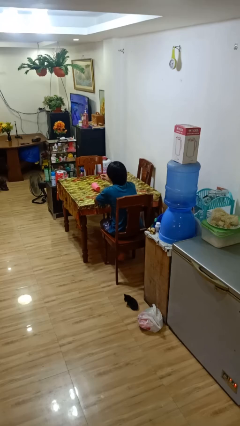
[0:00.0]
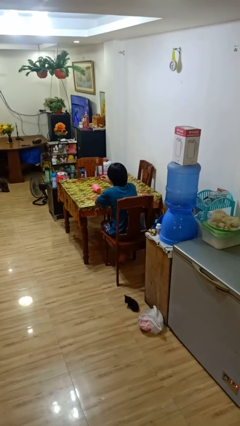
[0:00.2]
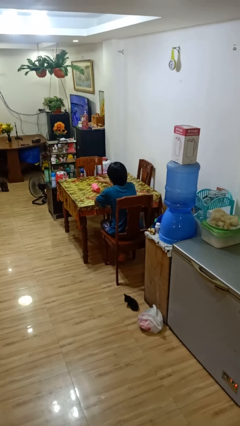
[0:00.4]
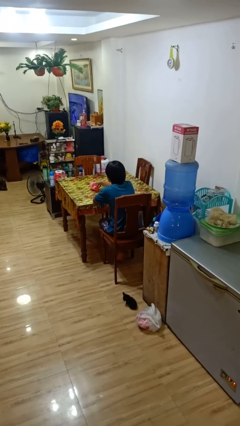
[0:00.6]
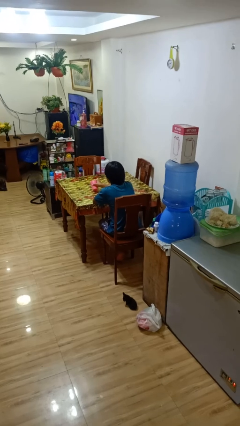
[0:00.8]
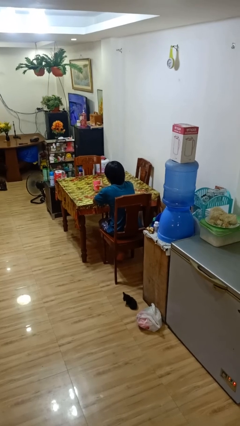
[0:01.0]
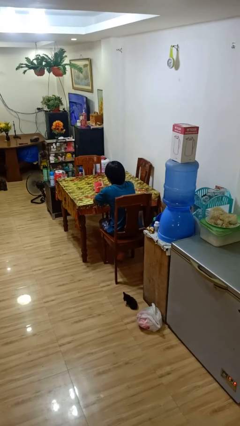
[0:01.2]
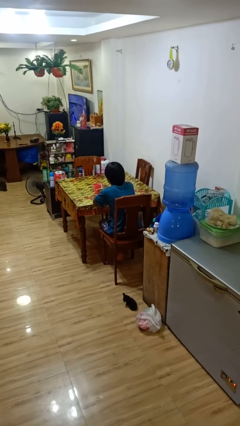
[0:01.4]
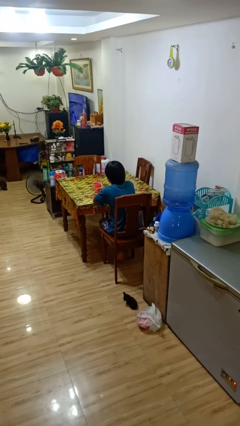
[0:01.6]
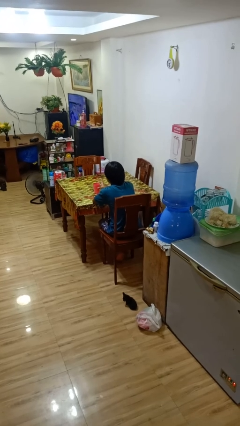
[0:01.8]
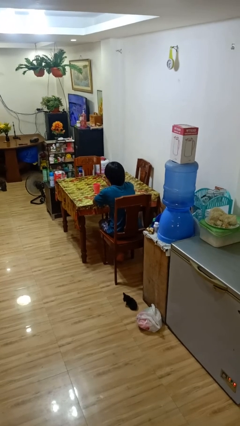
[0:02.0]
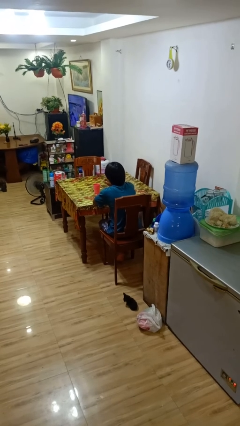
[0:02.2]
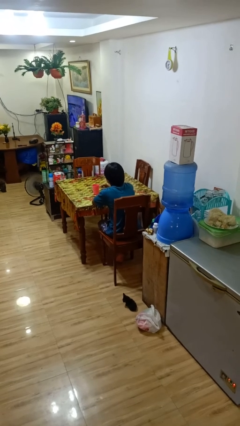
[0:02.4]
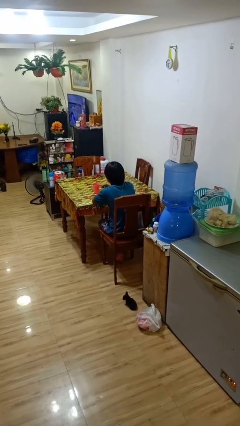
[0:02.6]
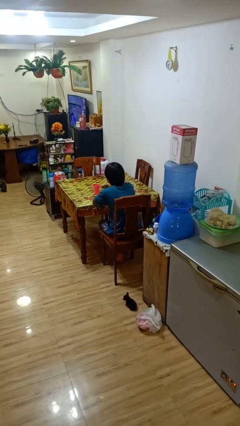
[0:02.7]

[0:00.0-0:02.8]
person sets upright glass

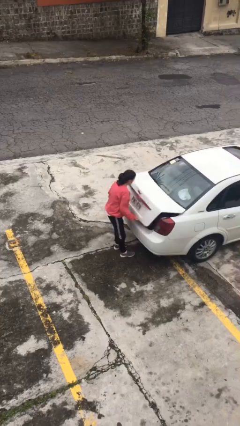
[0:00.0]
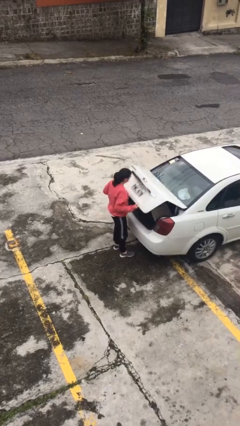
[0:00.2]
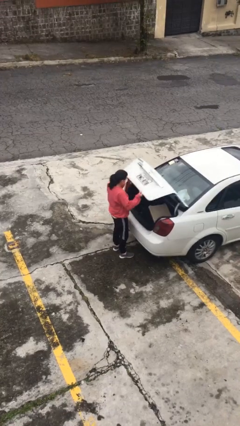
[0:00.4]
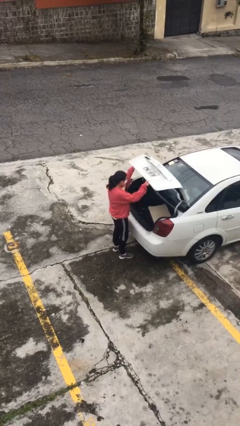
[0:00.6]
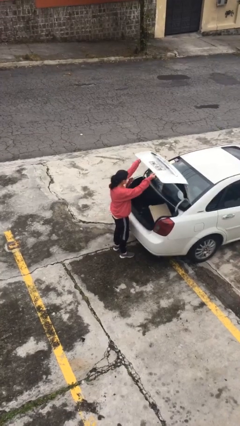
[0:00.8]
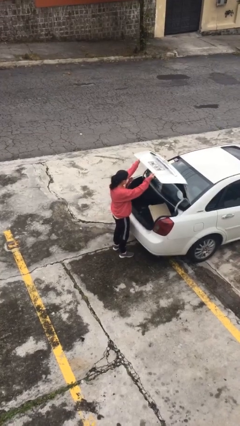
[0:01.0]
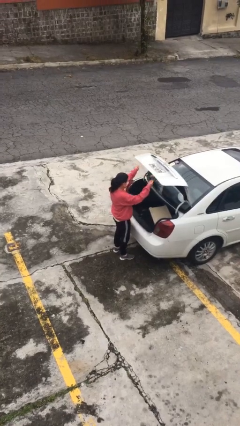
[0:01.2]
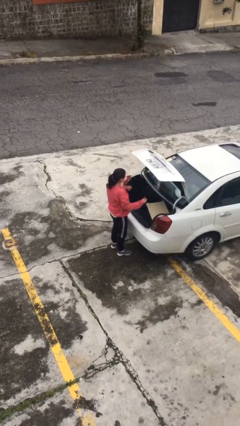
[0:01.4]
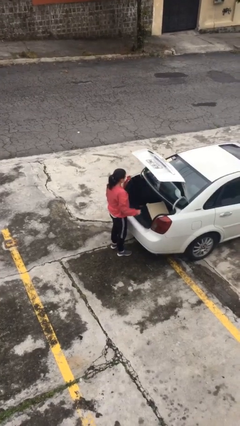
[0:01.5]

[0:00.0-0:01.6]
person opens car trunk

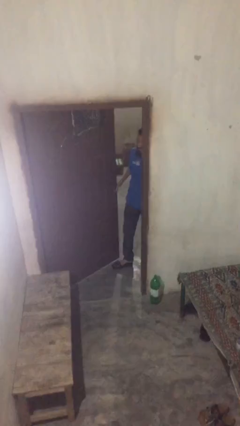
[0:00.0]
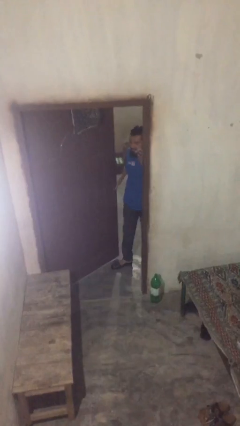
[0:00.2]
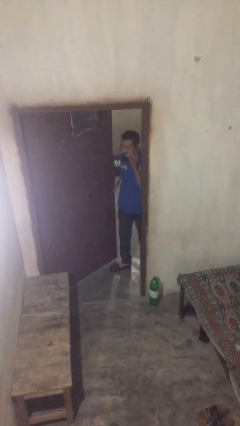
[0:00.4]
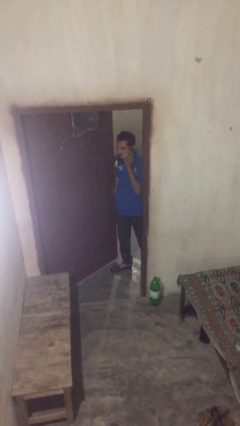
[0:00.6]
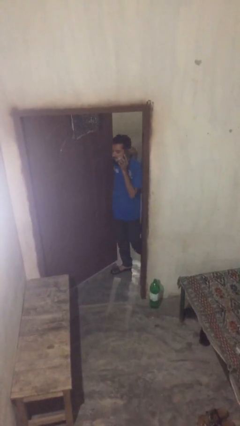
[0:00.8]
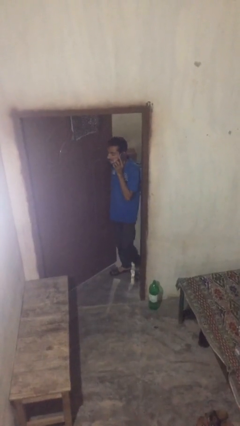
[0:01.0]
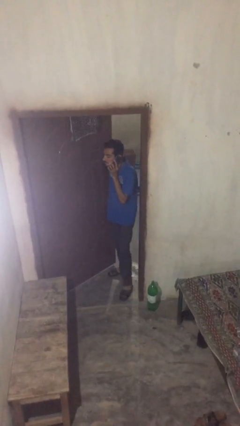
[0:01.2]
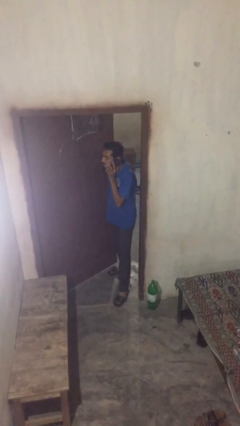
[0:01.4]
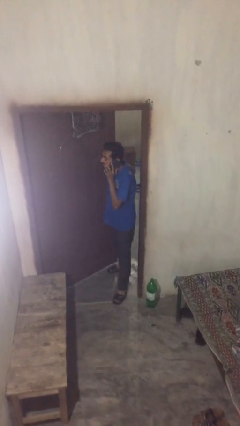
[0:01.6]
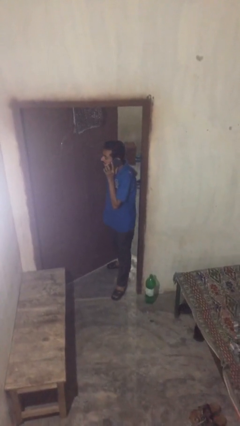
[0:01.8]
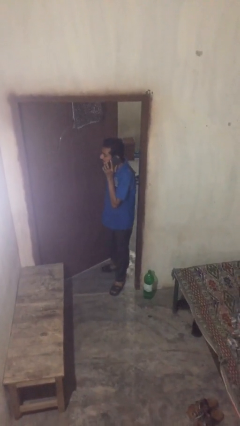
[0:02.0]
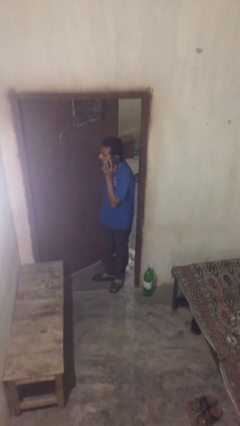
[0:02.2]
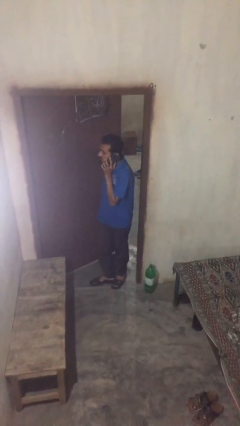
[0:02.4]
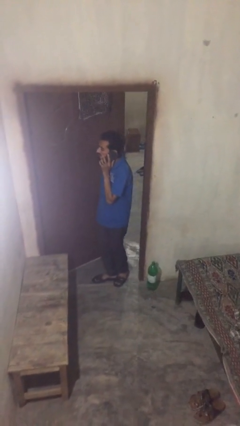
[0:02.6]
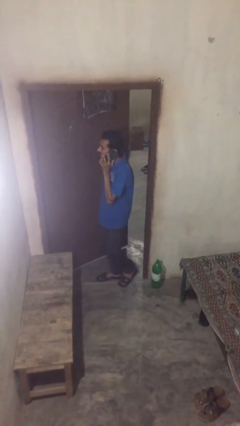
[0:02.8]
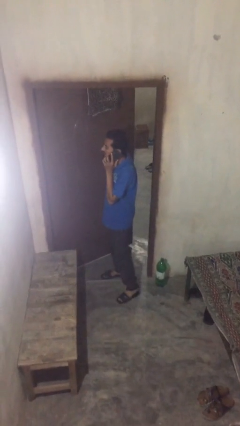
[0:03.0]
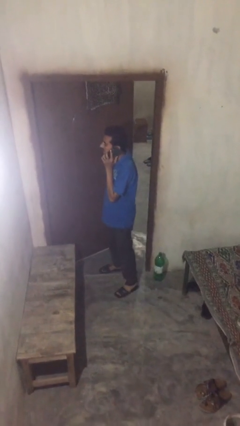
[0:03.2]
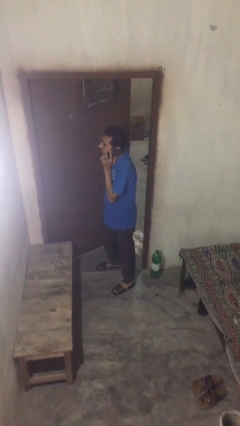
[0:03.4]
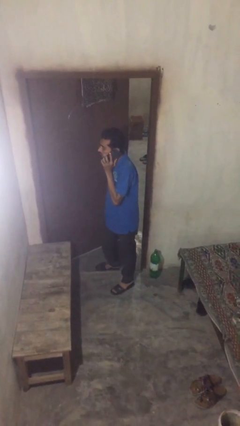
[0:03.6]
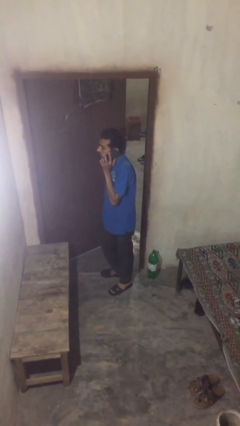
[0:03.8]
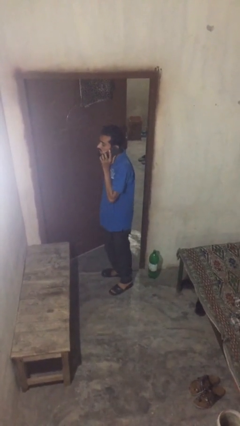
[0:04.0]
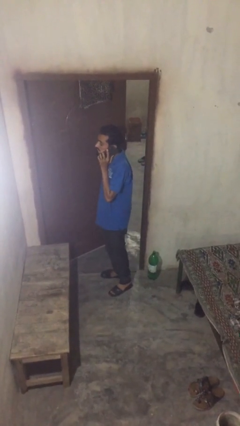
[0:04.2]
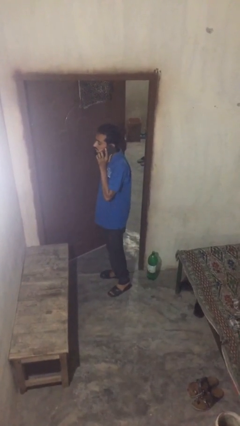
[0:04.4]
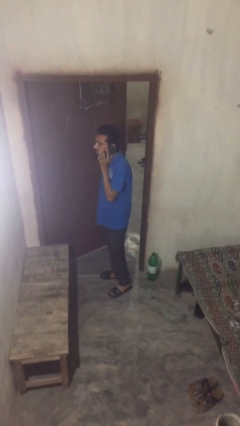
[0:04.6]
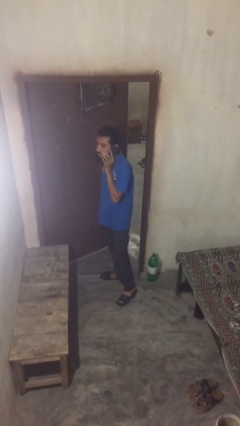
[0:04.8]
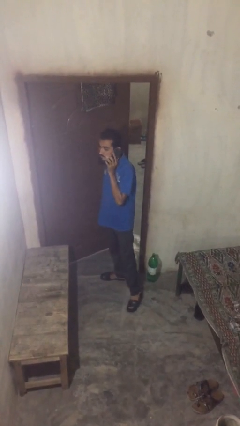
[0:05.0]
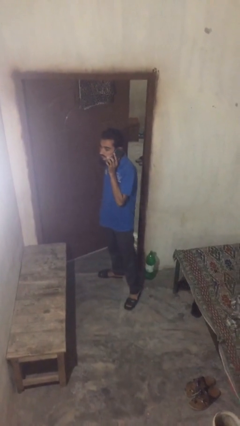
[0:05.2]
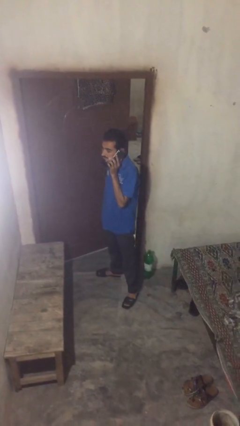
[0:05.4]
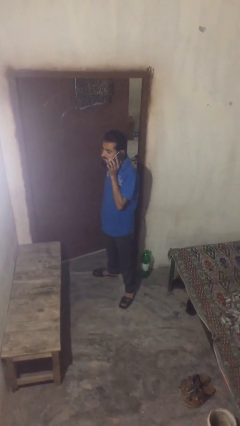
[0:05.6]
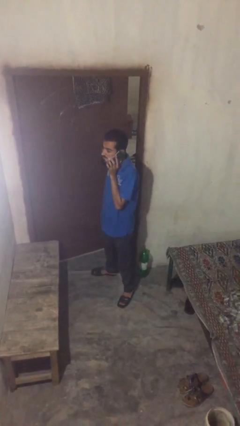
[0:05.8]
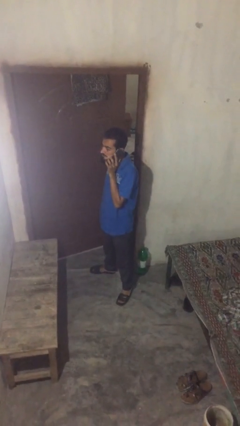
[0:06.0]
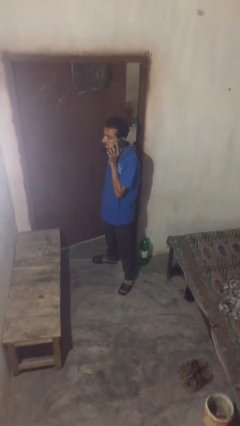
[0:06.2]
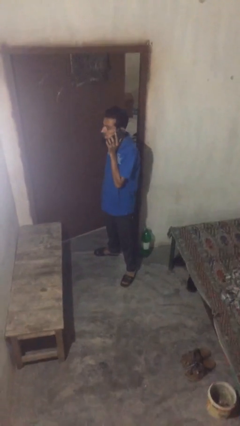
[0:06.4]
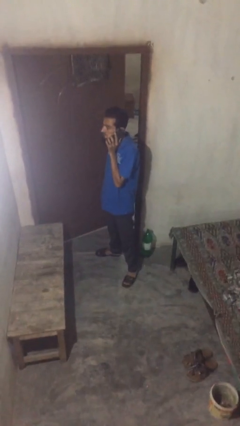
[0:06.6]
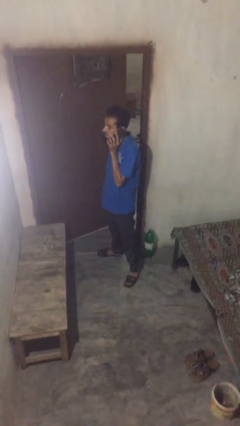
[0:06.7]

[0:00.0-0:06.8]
person enters scene through structure

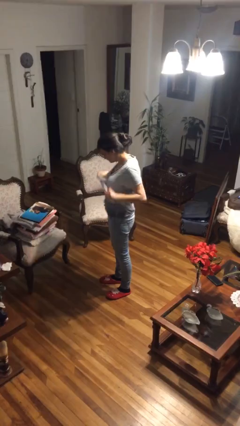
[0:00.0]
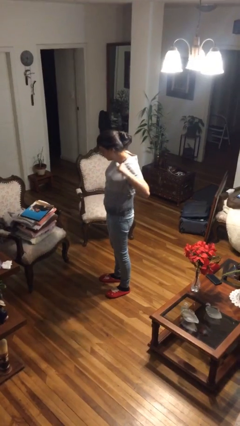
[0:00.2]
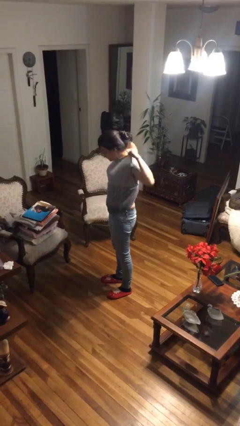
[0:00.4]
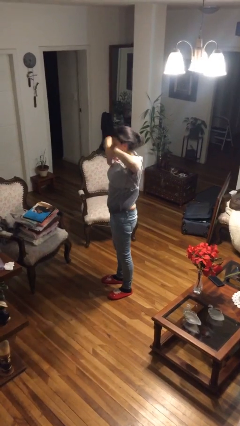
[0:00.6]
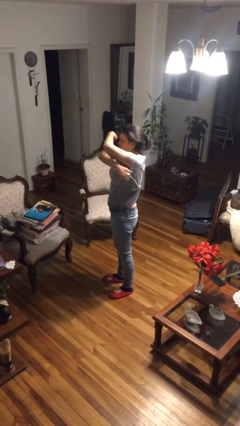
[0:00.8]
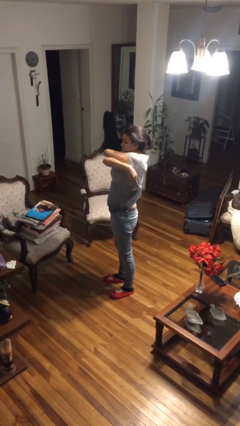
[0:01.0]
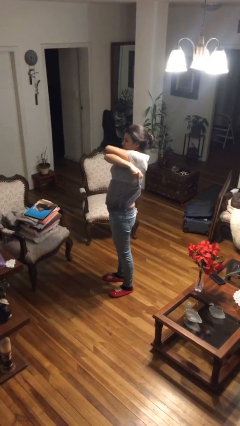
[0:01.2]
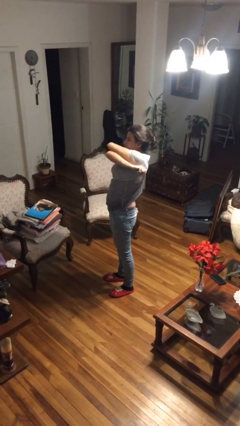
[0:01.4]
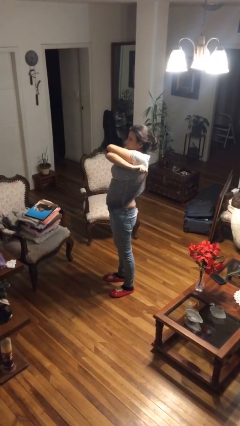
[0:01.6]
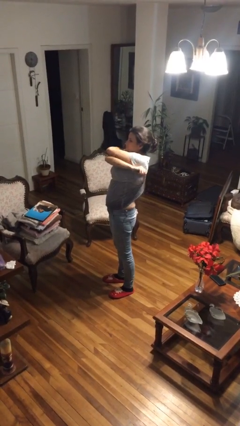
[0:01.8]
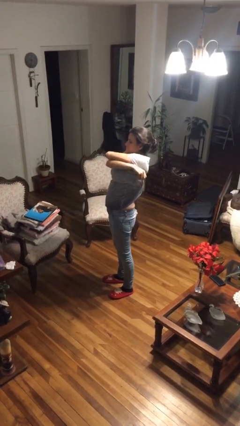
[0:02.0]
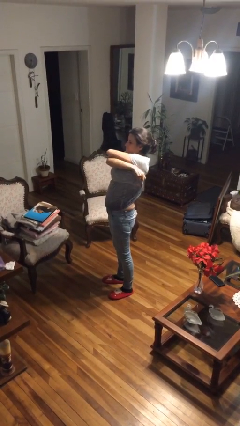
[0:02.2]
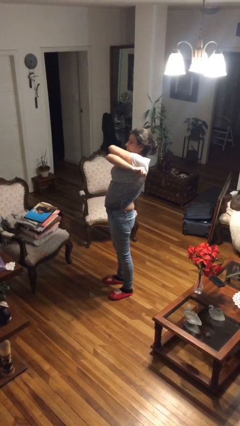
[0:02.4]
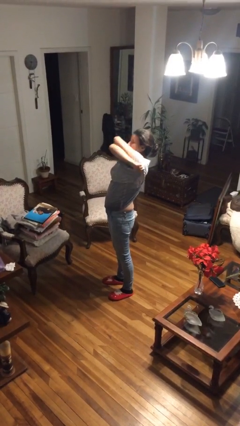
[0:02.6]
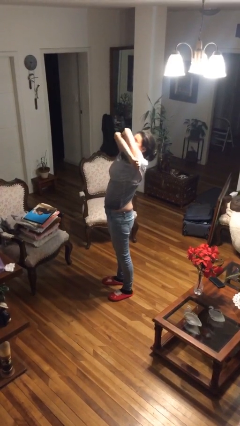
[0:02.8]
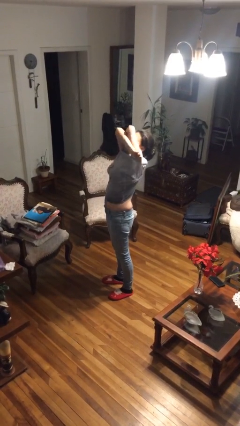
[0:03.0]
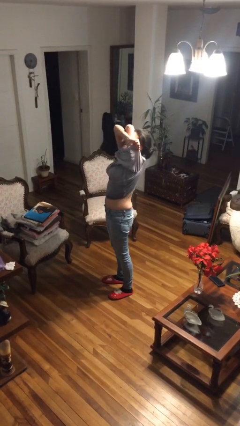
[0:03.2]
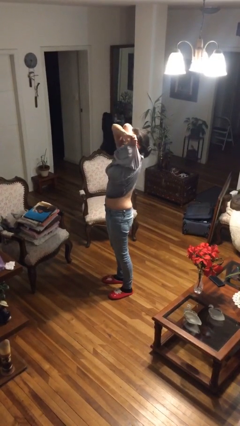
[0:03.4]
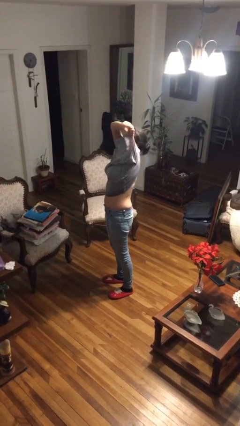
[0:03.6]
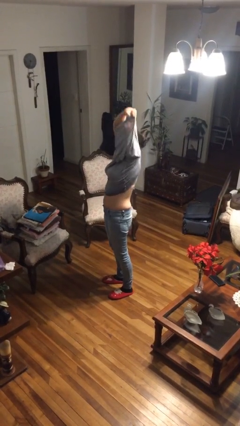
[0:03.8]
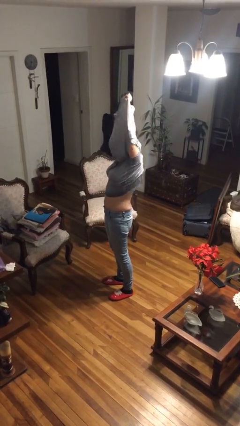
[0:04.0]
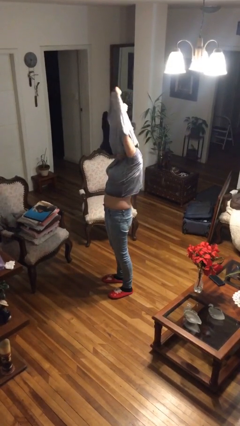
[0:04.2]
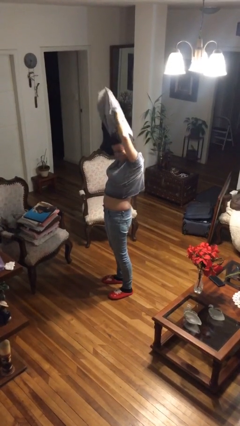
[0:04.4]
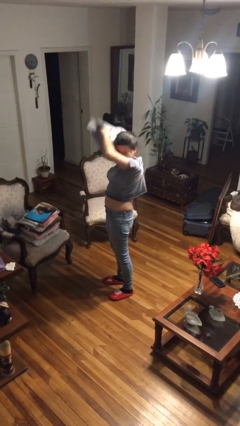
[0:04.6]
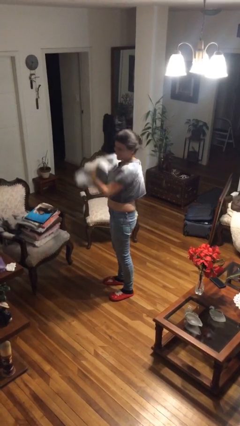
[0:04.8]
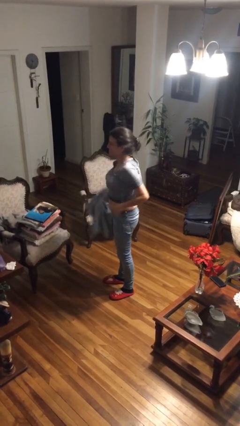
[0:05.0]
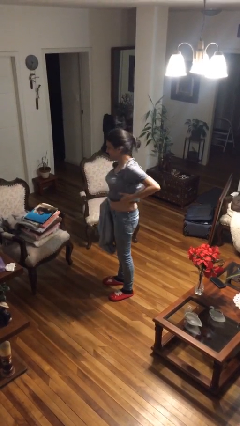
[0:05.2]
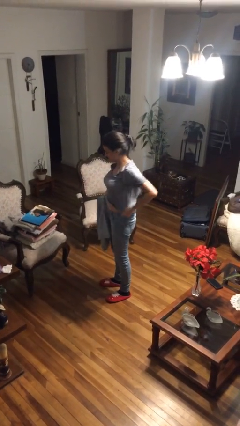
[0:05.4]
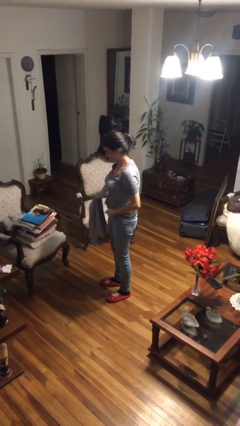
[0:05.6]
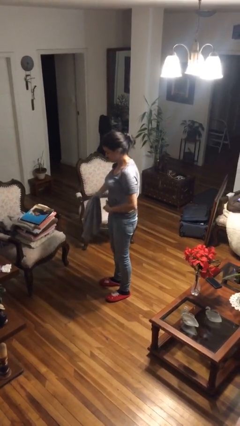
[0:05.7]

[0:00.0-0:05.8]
person takes off shirt

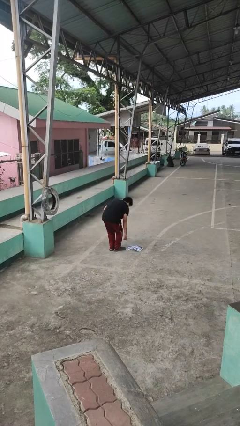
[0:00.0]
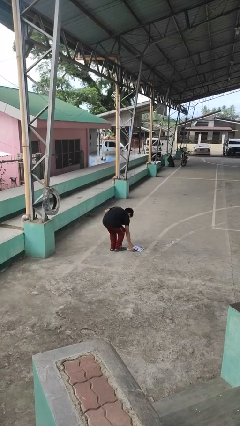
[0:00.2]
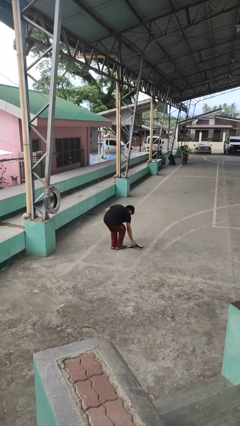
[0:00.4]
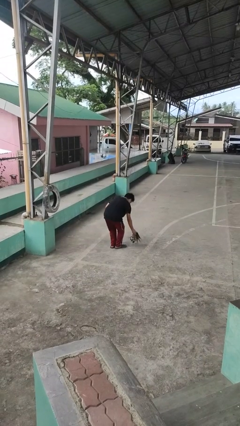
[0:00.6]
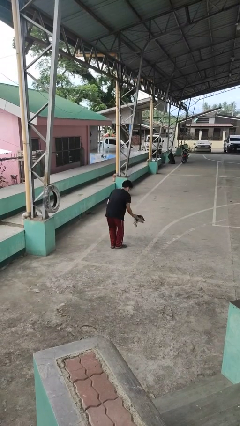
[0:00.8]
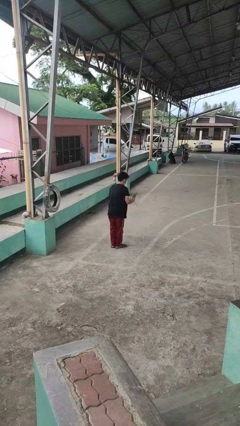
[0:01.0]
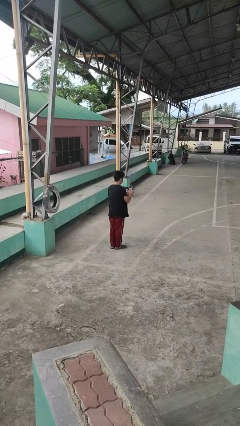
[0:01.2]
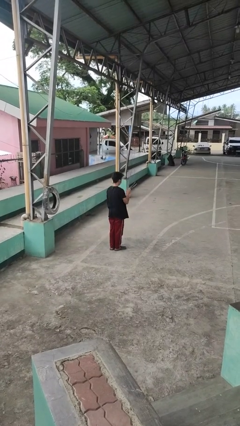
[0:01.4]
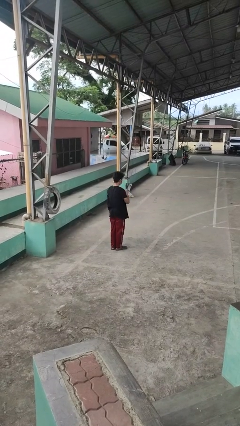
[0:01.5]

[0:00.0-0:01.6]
person picks up object from floor
